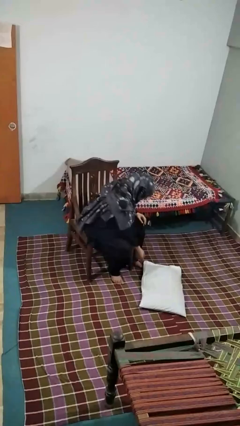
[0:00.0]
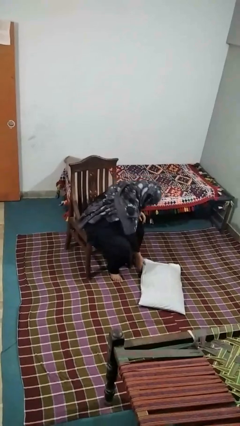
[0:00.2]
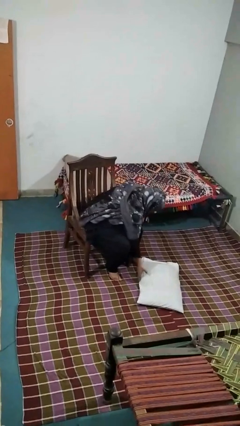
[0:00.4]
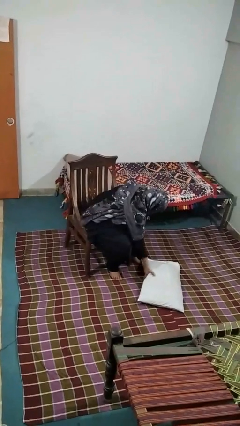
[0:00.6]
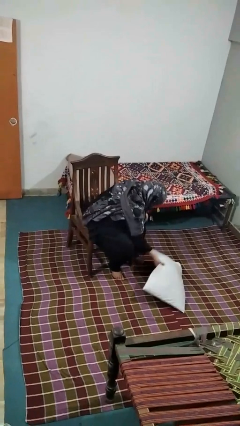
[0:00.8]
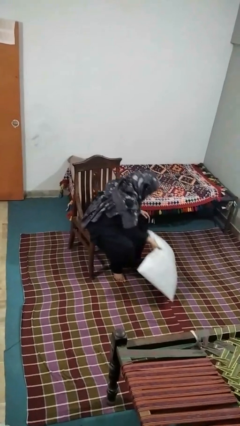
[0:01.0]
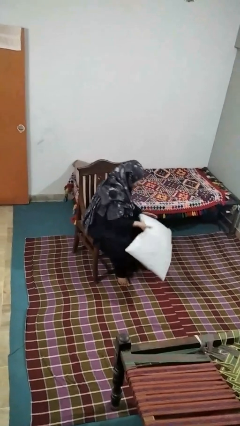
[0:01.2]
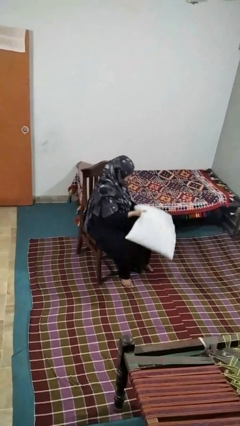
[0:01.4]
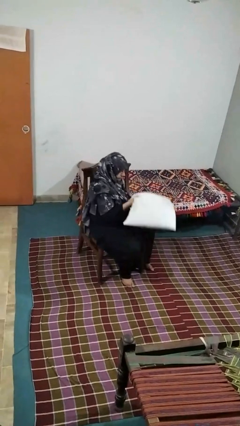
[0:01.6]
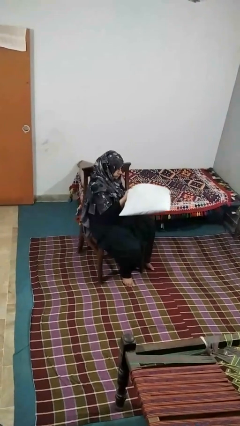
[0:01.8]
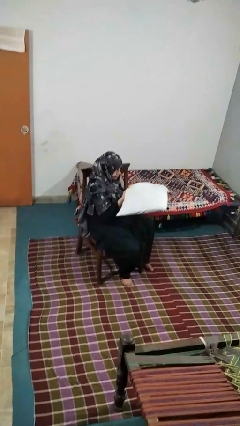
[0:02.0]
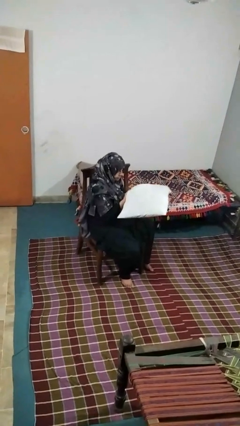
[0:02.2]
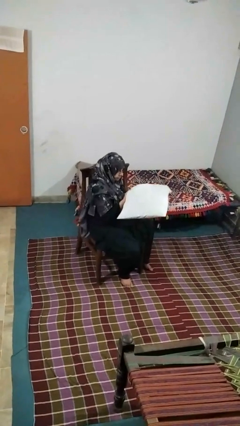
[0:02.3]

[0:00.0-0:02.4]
person picks up object from floor

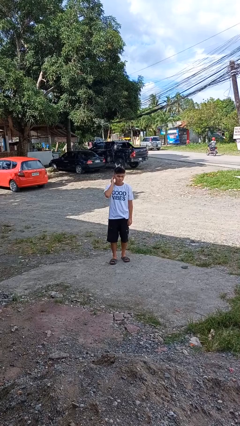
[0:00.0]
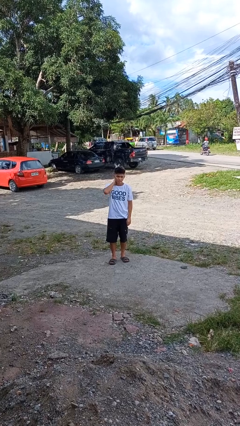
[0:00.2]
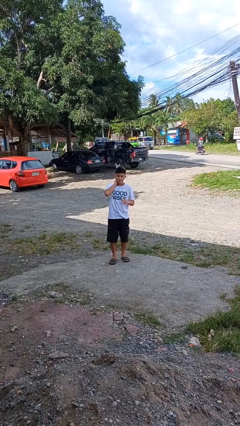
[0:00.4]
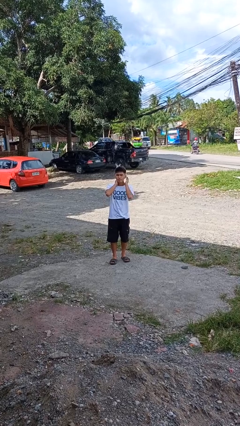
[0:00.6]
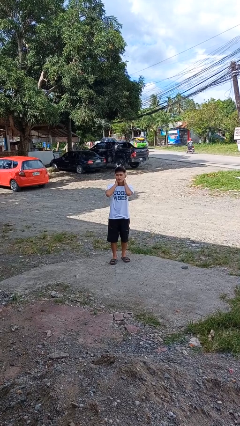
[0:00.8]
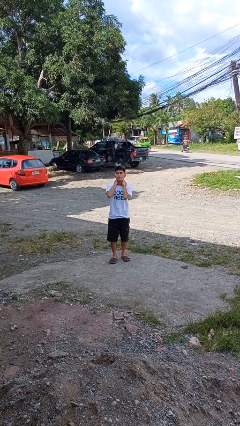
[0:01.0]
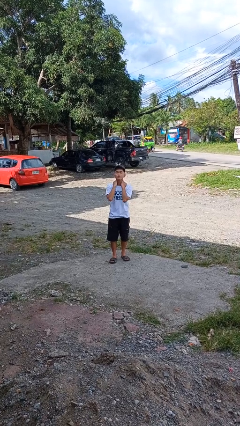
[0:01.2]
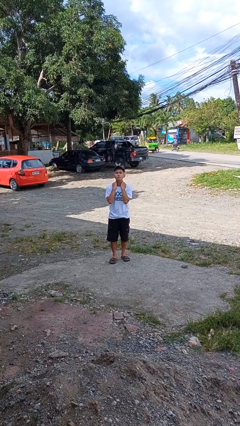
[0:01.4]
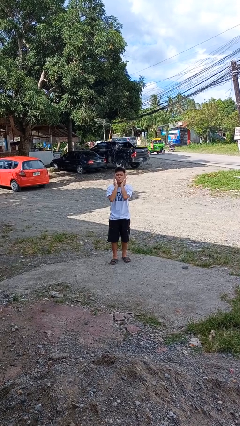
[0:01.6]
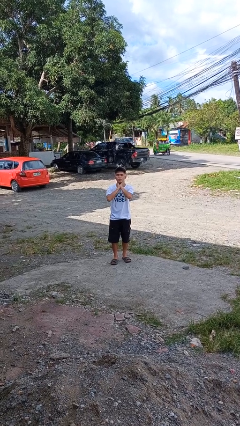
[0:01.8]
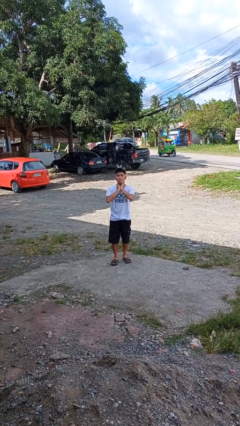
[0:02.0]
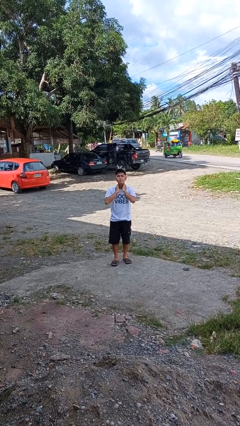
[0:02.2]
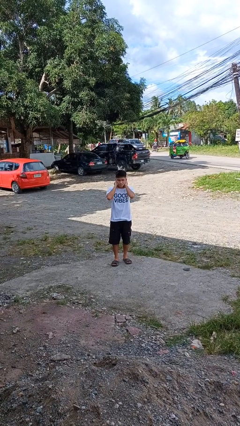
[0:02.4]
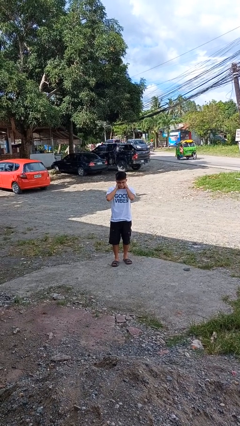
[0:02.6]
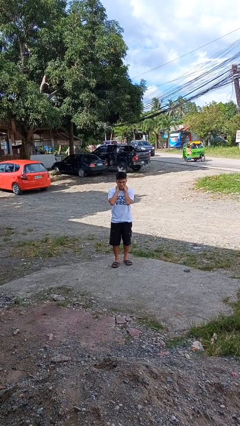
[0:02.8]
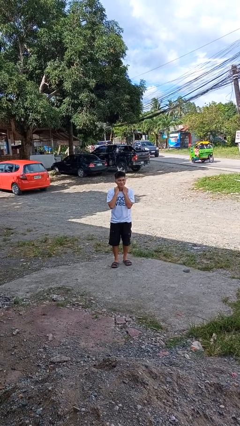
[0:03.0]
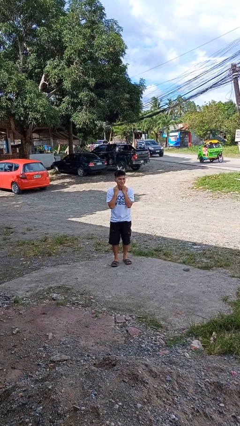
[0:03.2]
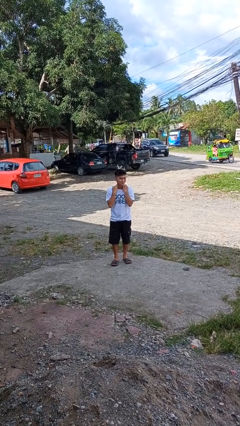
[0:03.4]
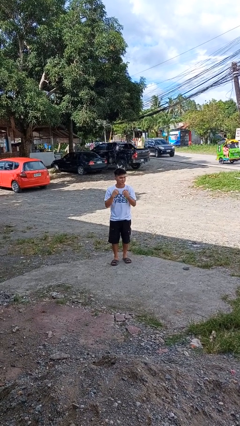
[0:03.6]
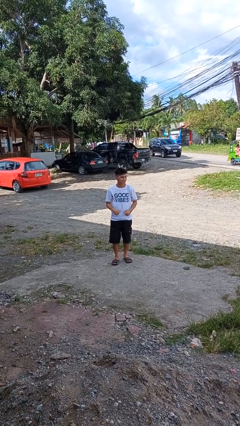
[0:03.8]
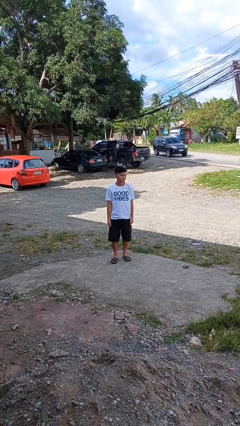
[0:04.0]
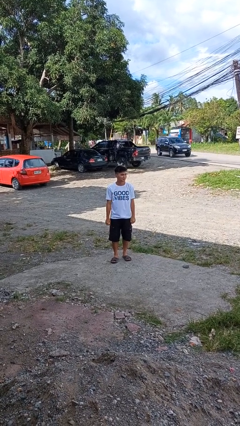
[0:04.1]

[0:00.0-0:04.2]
person rubs neck

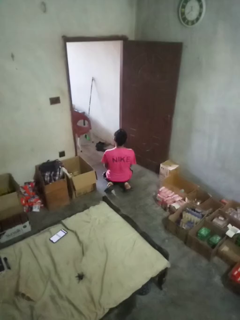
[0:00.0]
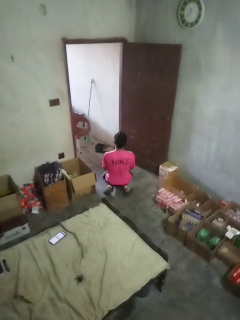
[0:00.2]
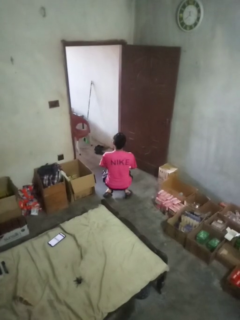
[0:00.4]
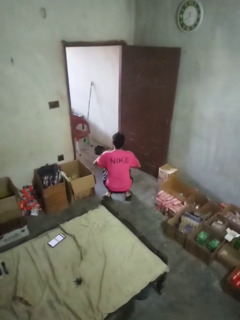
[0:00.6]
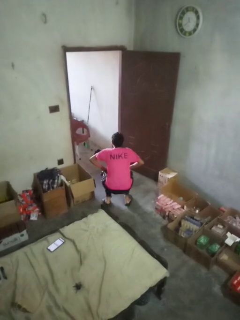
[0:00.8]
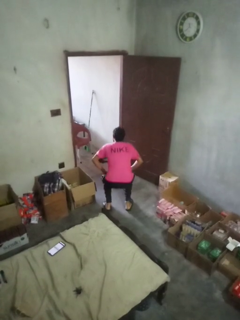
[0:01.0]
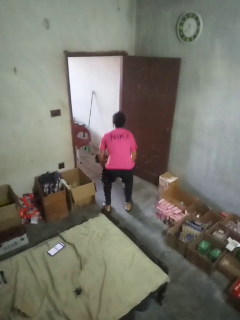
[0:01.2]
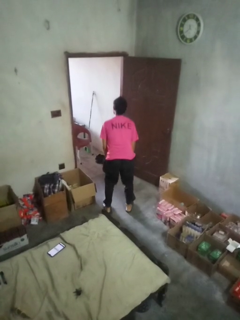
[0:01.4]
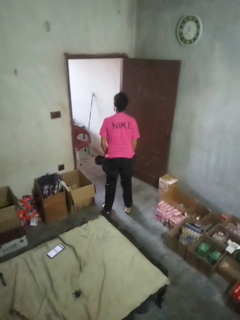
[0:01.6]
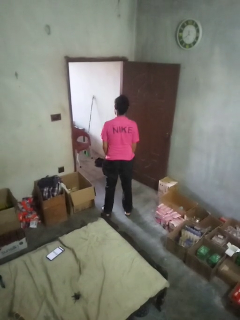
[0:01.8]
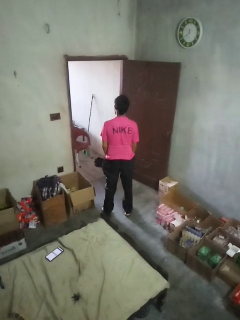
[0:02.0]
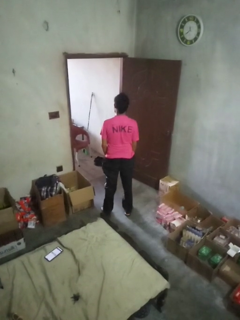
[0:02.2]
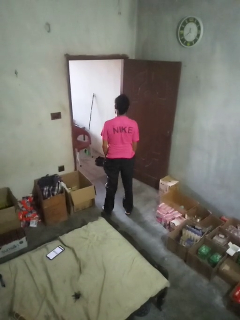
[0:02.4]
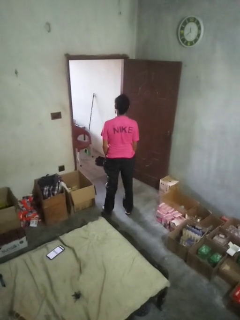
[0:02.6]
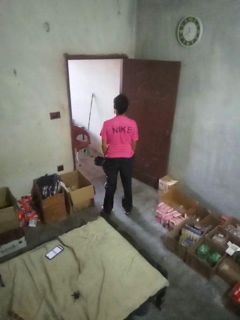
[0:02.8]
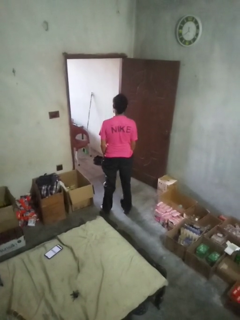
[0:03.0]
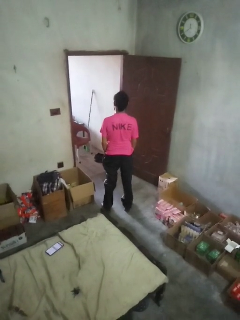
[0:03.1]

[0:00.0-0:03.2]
person stands up from floor

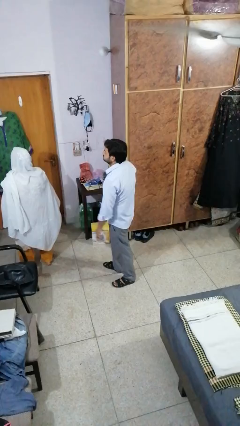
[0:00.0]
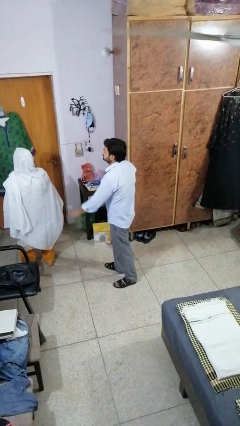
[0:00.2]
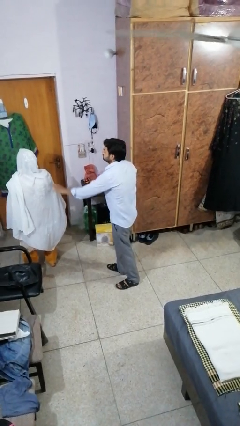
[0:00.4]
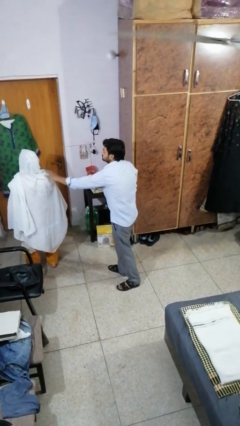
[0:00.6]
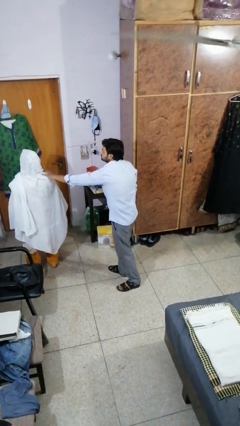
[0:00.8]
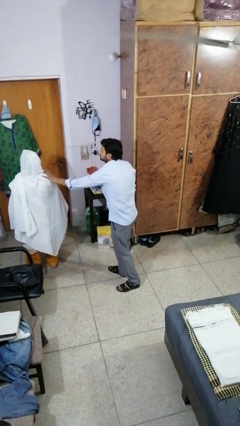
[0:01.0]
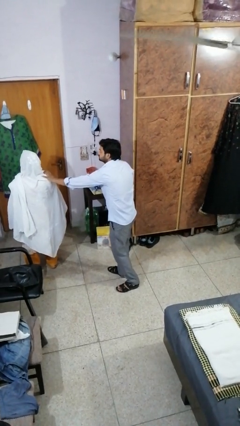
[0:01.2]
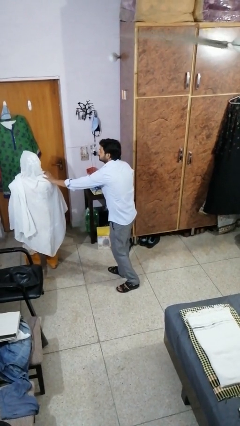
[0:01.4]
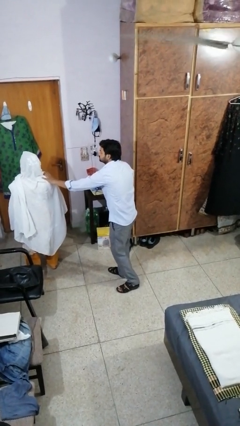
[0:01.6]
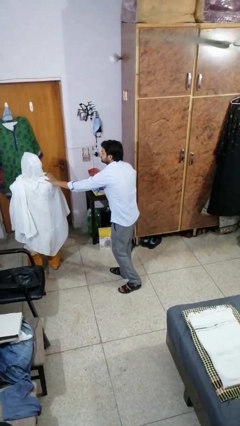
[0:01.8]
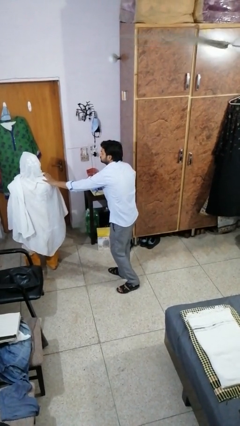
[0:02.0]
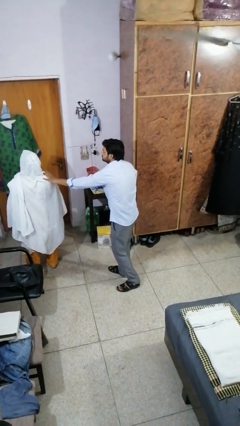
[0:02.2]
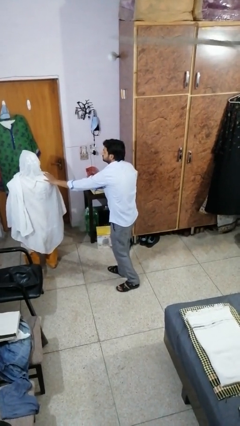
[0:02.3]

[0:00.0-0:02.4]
person touches back of person

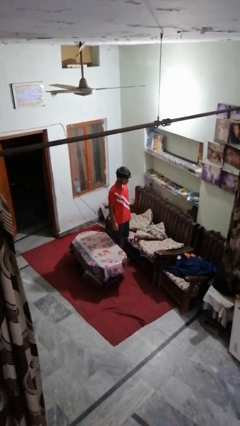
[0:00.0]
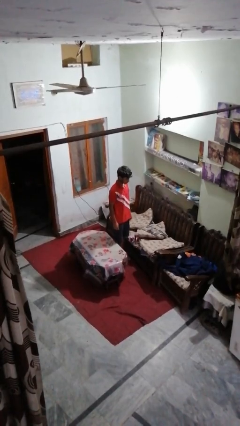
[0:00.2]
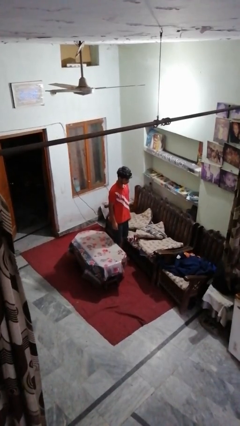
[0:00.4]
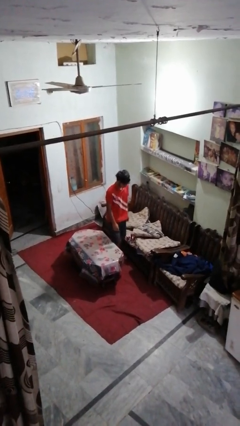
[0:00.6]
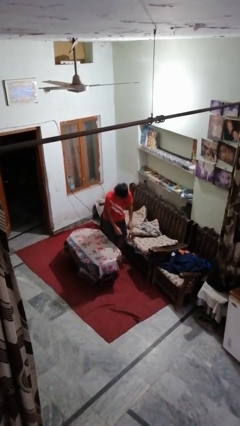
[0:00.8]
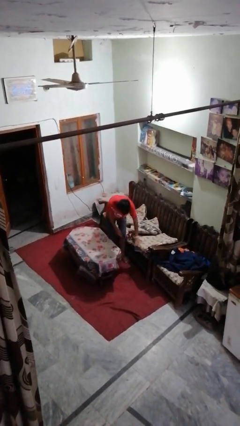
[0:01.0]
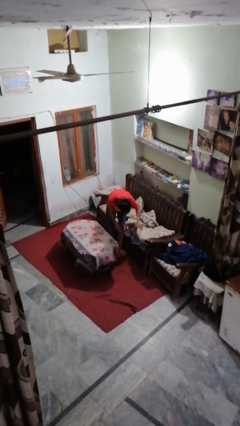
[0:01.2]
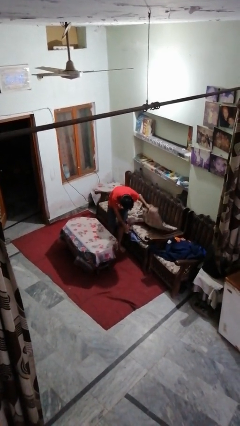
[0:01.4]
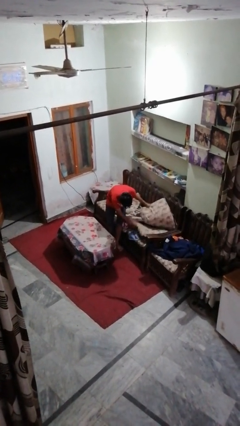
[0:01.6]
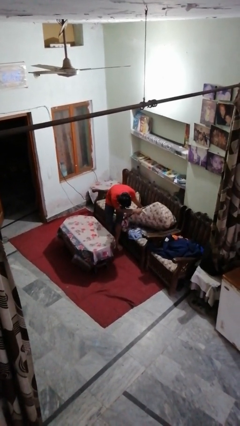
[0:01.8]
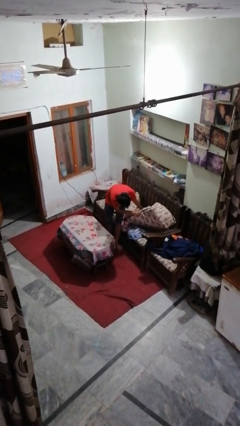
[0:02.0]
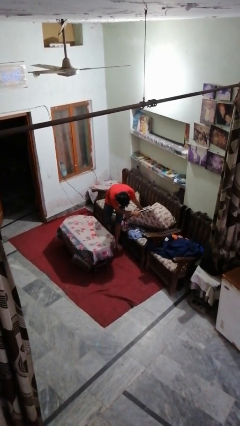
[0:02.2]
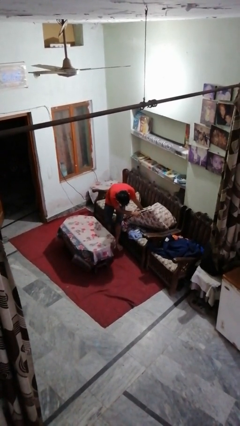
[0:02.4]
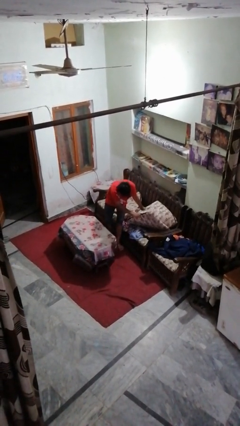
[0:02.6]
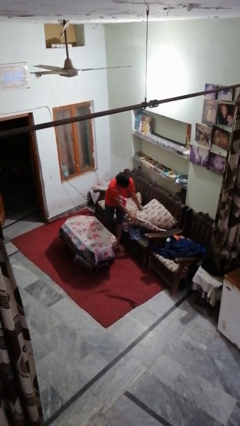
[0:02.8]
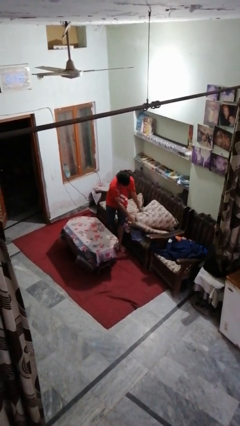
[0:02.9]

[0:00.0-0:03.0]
person searches in couch

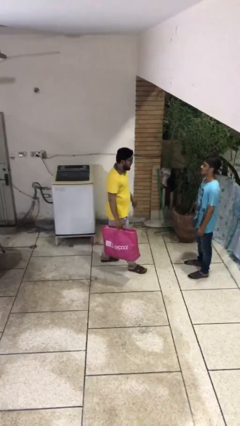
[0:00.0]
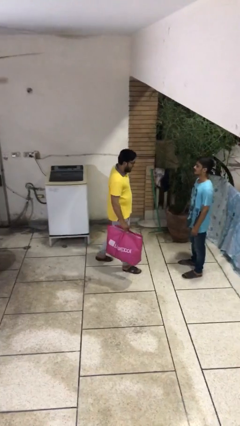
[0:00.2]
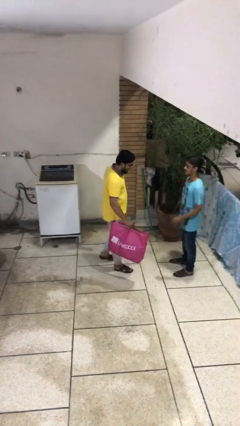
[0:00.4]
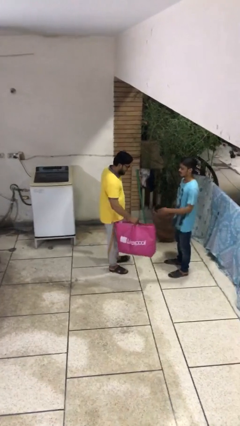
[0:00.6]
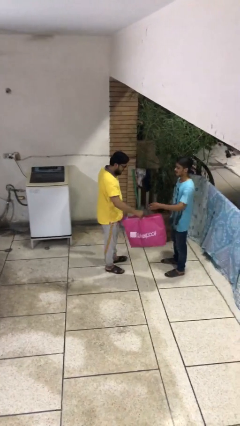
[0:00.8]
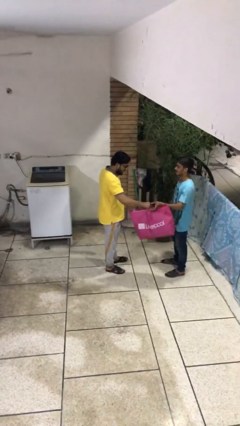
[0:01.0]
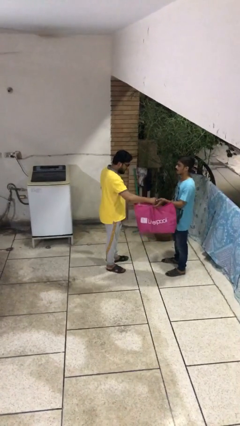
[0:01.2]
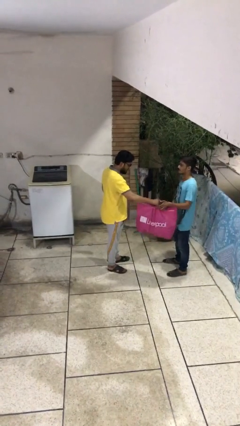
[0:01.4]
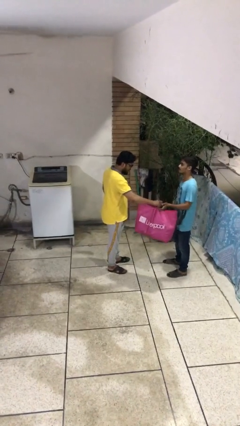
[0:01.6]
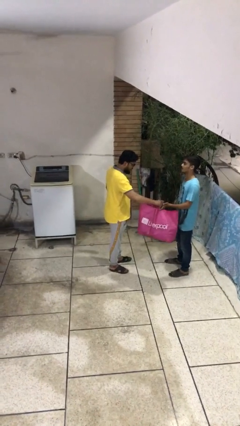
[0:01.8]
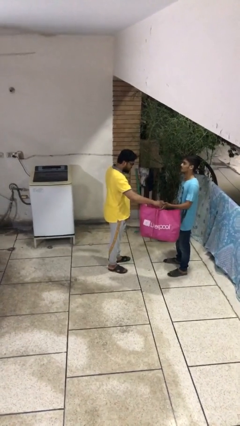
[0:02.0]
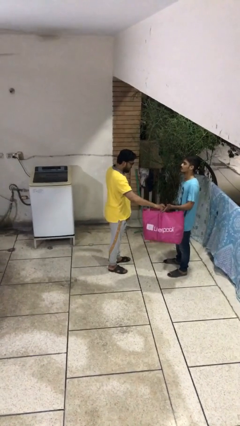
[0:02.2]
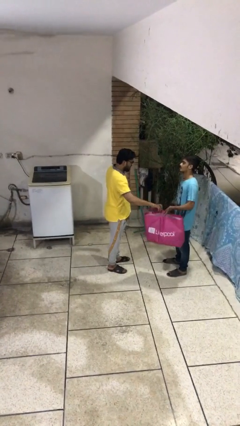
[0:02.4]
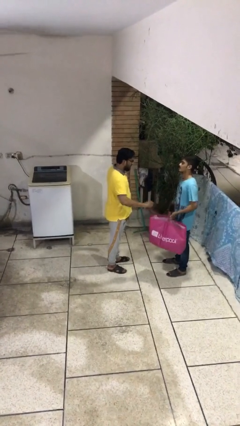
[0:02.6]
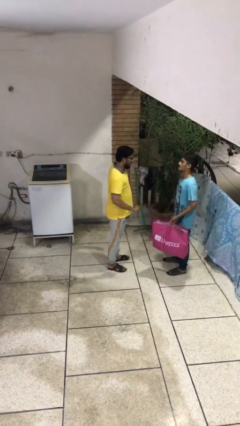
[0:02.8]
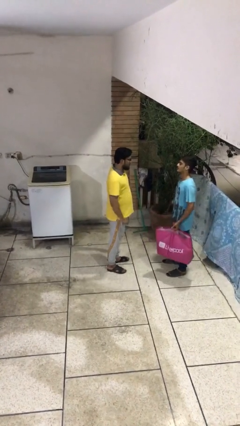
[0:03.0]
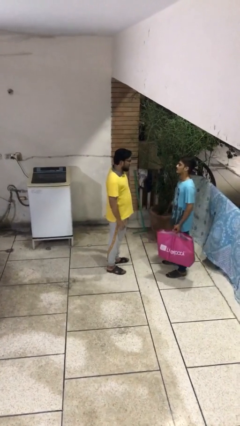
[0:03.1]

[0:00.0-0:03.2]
person transfers object to person
